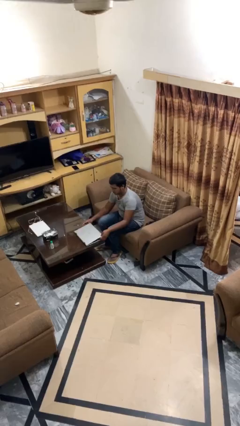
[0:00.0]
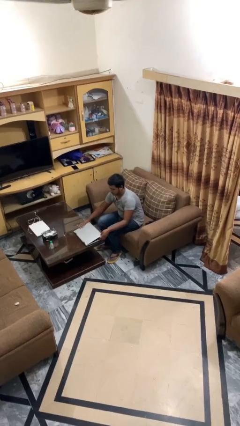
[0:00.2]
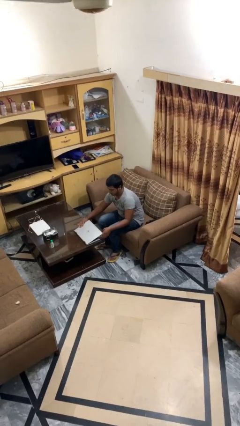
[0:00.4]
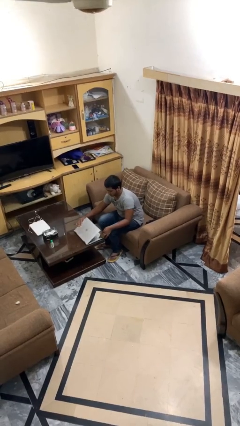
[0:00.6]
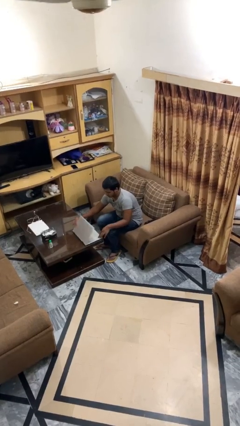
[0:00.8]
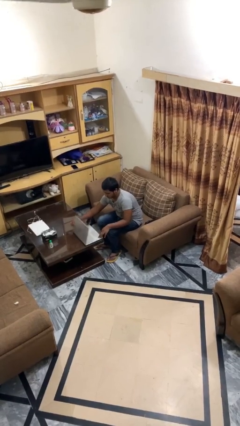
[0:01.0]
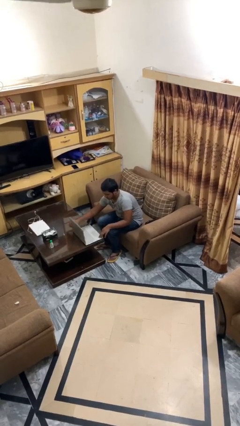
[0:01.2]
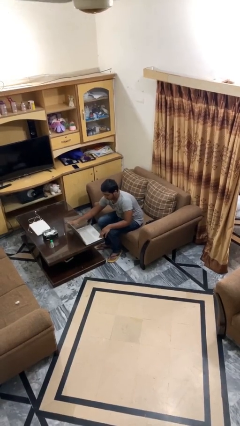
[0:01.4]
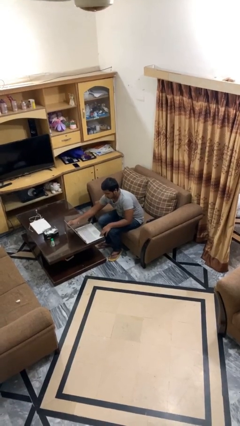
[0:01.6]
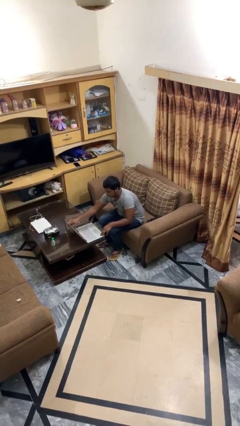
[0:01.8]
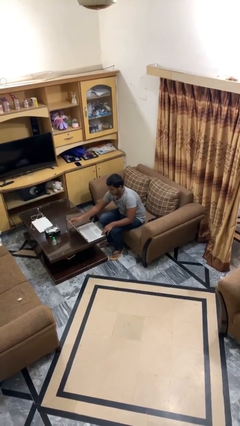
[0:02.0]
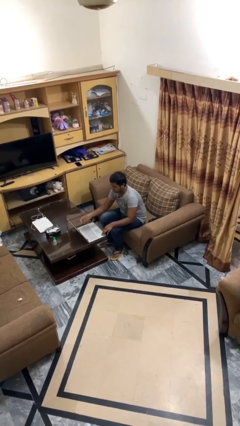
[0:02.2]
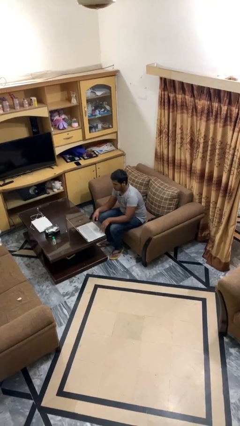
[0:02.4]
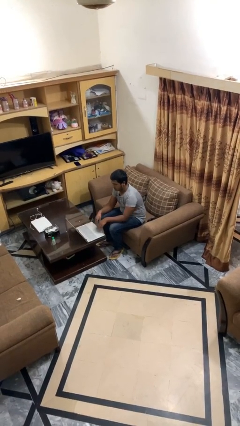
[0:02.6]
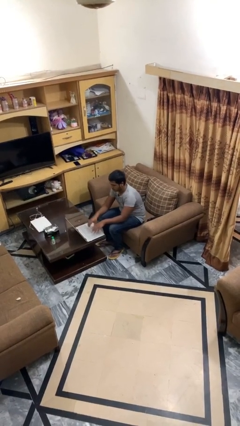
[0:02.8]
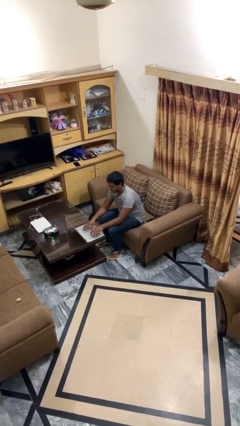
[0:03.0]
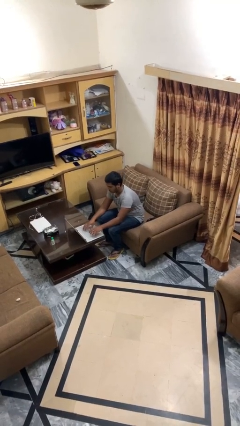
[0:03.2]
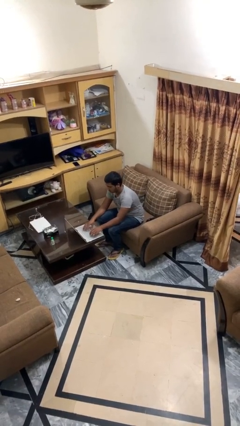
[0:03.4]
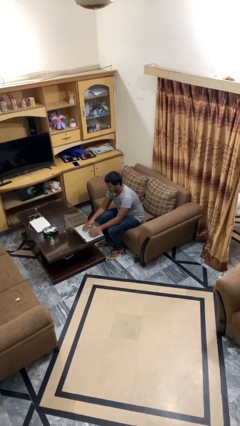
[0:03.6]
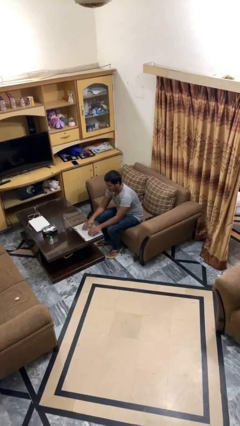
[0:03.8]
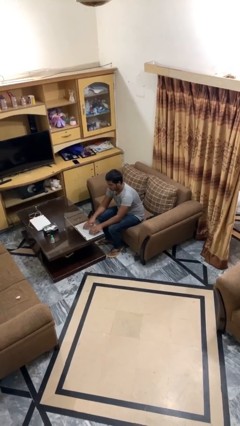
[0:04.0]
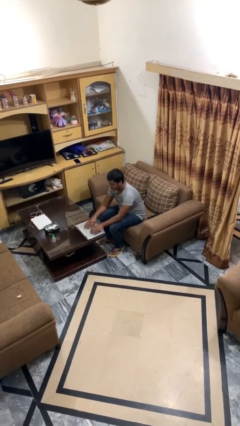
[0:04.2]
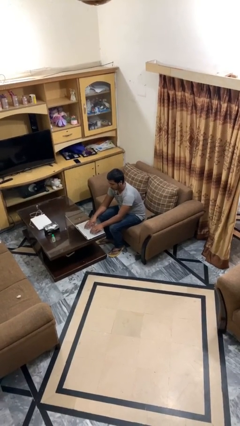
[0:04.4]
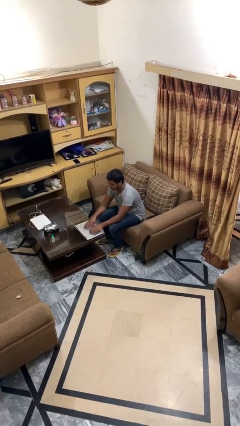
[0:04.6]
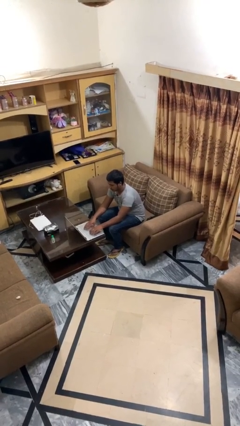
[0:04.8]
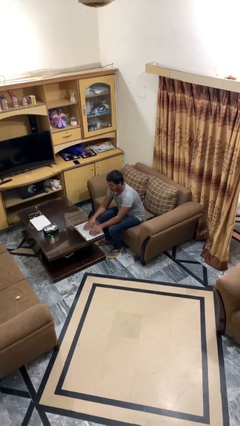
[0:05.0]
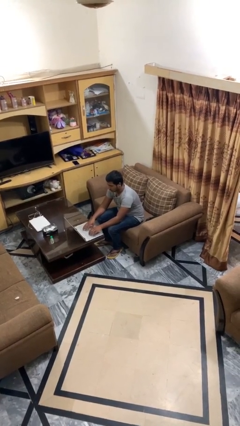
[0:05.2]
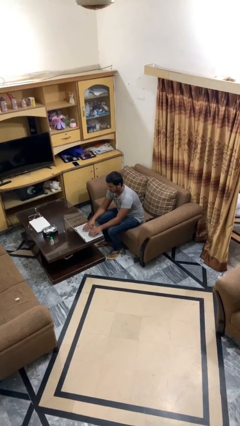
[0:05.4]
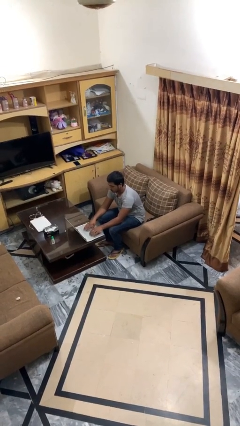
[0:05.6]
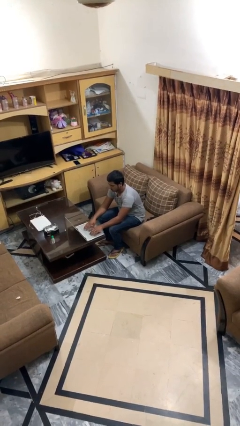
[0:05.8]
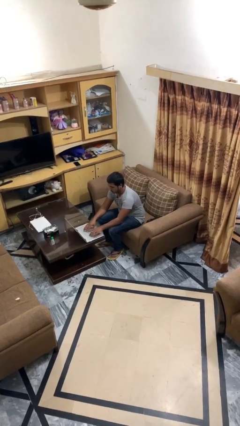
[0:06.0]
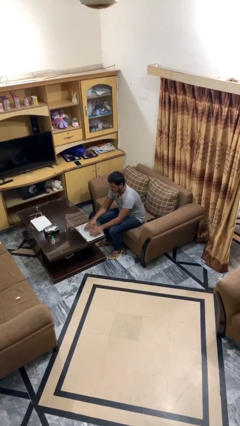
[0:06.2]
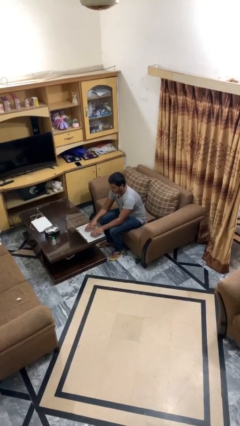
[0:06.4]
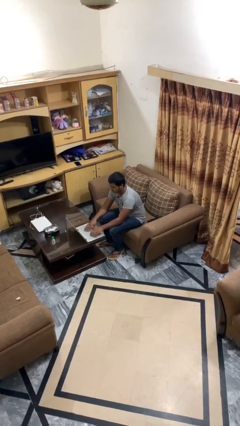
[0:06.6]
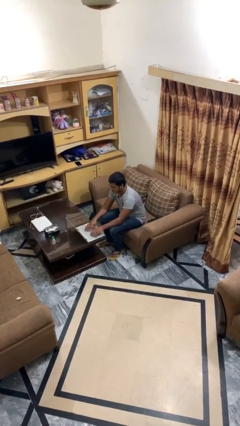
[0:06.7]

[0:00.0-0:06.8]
person interacts with laptop

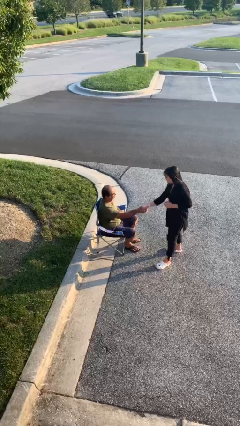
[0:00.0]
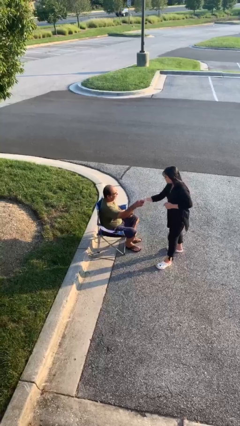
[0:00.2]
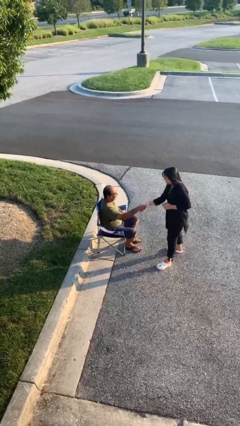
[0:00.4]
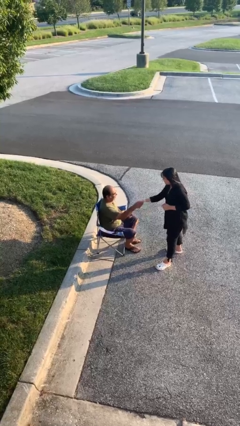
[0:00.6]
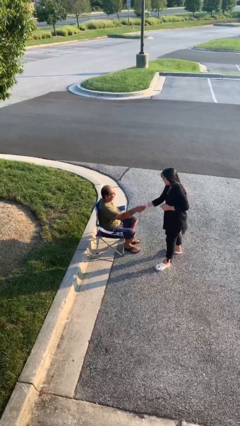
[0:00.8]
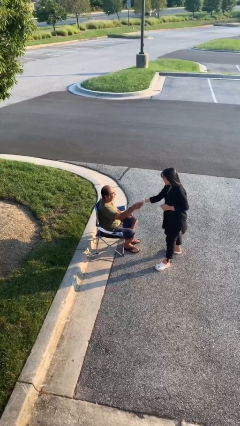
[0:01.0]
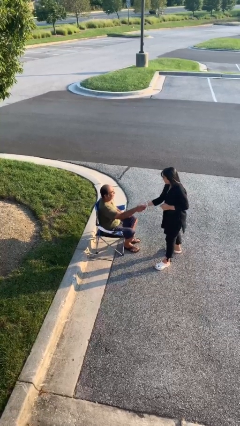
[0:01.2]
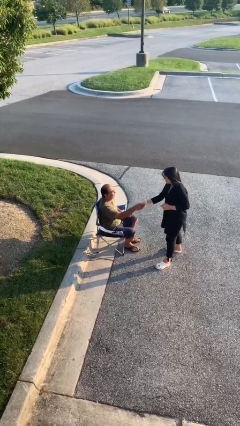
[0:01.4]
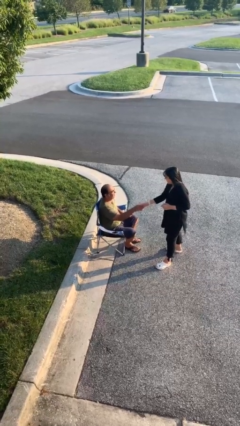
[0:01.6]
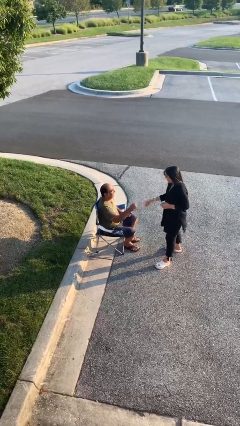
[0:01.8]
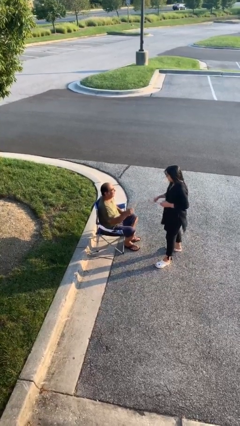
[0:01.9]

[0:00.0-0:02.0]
person shakes hand

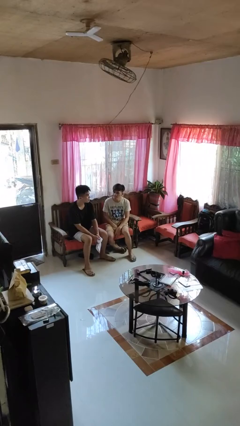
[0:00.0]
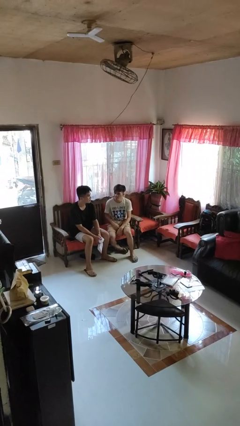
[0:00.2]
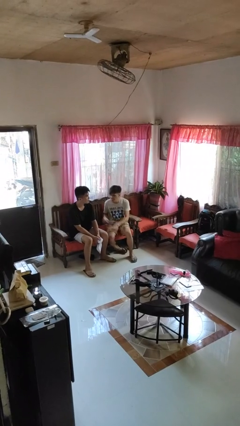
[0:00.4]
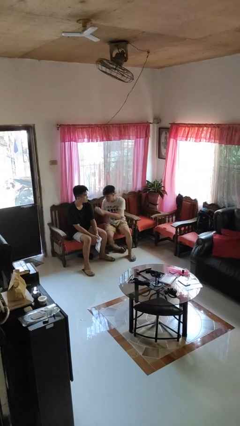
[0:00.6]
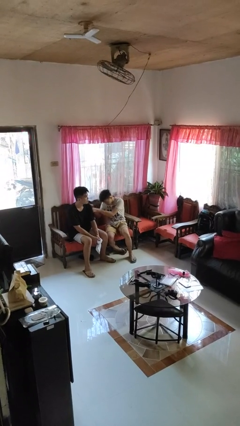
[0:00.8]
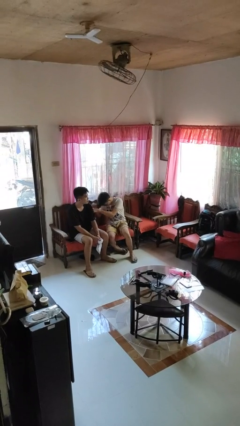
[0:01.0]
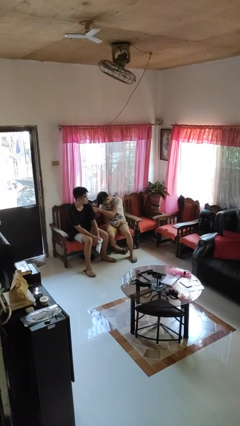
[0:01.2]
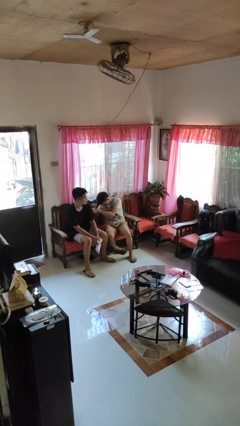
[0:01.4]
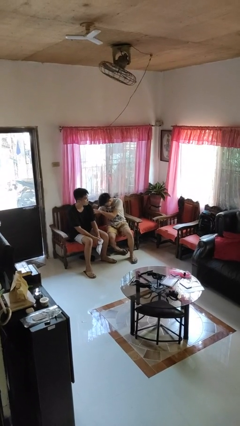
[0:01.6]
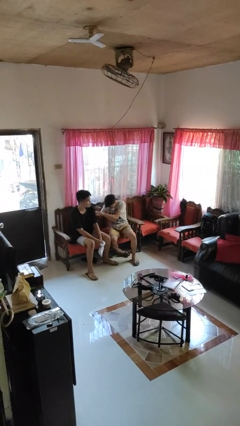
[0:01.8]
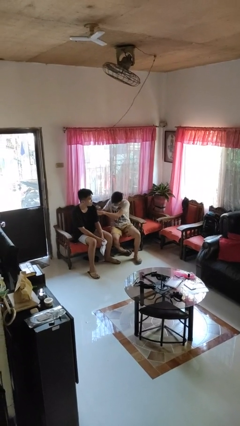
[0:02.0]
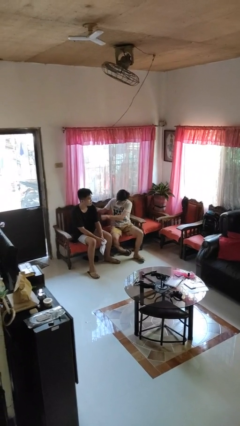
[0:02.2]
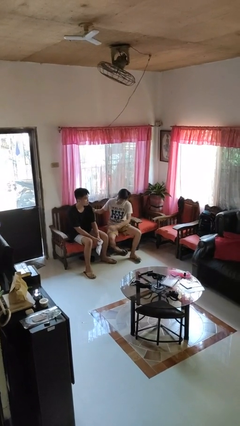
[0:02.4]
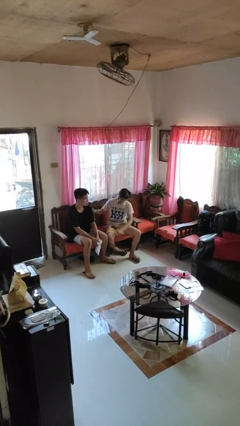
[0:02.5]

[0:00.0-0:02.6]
person pounds shoulders of person

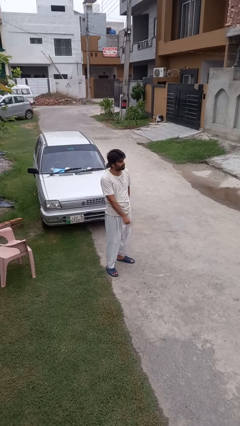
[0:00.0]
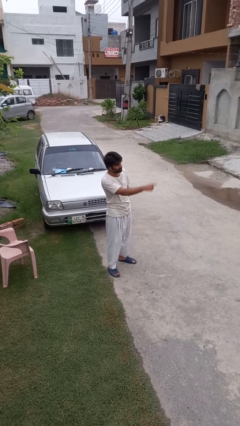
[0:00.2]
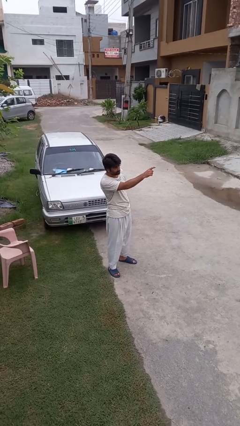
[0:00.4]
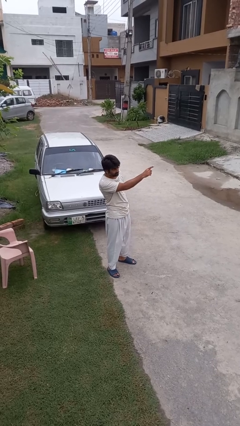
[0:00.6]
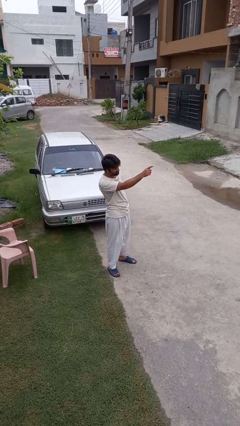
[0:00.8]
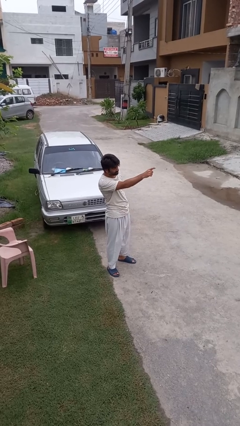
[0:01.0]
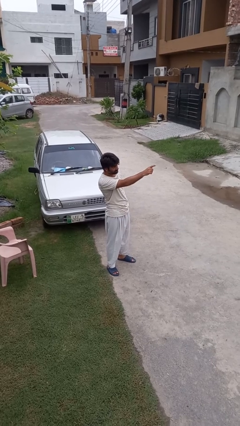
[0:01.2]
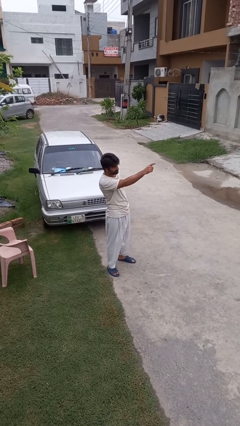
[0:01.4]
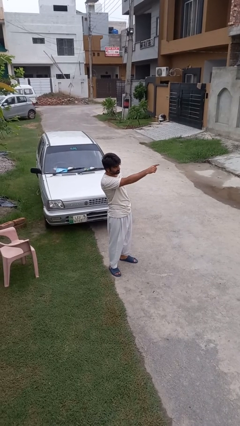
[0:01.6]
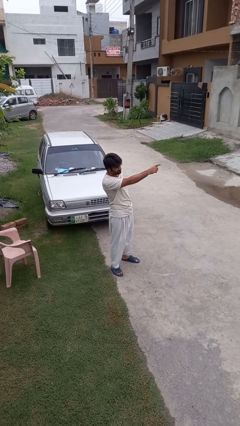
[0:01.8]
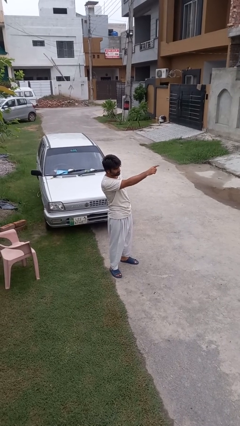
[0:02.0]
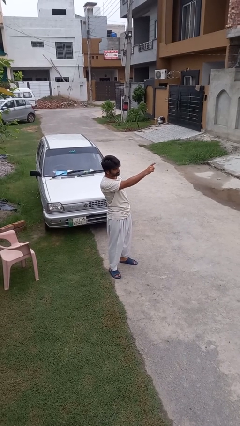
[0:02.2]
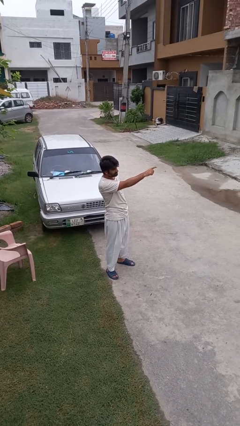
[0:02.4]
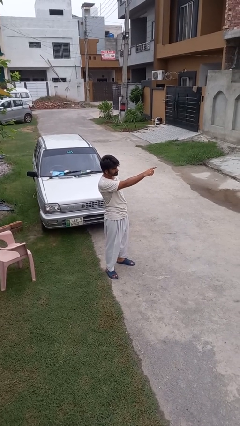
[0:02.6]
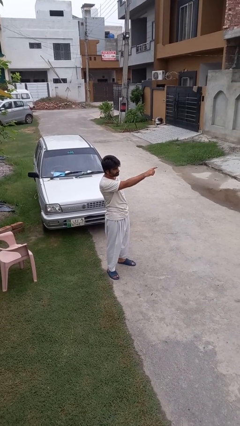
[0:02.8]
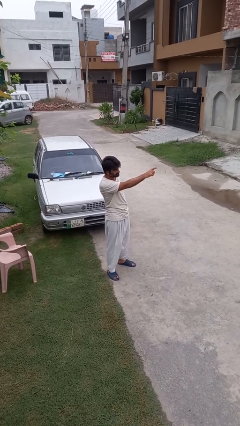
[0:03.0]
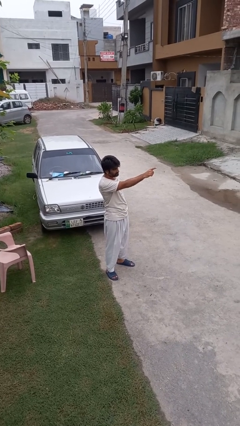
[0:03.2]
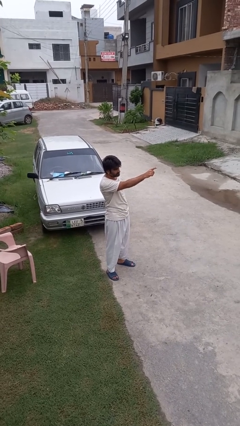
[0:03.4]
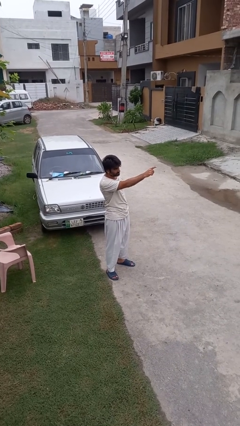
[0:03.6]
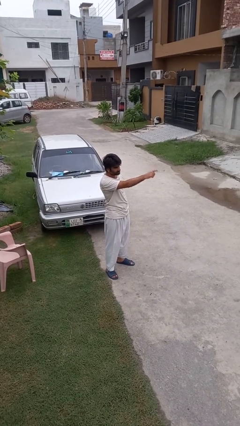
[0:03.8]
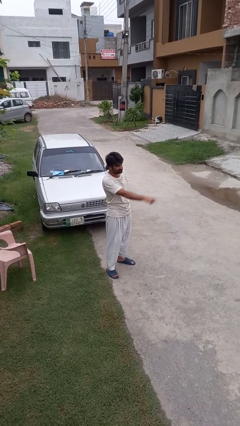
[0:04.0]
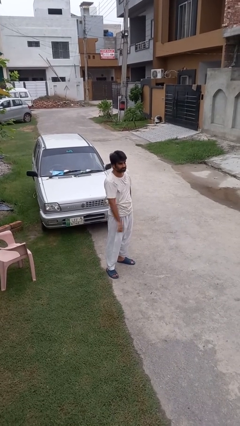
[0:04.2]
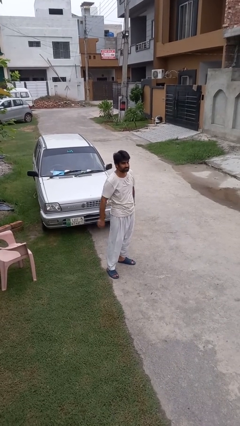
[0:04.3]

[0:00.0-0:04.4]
person points at person

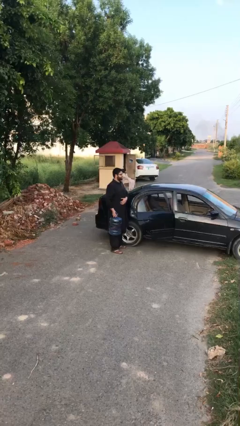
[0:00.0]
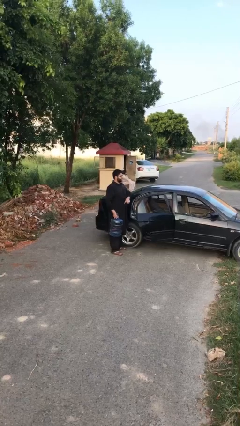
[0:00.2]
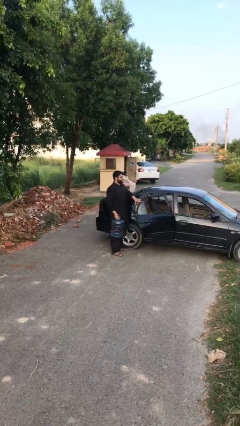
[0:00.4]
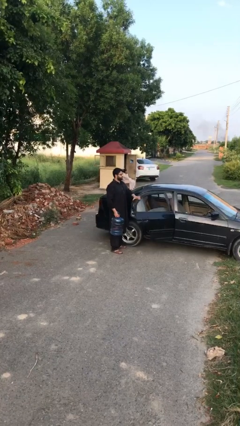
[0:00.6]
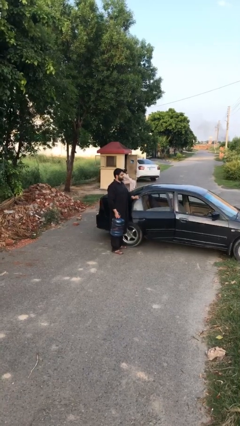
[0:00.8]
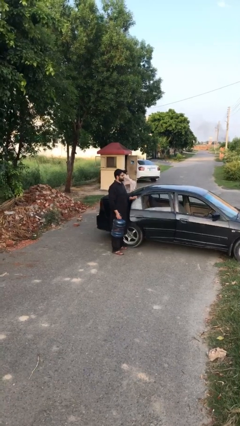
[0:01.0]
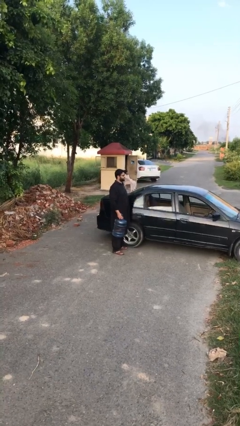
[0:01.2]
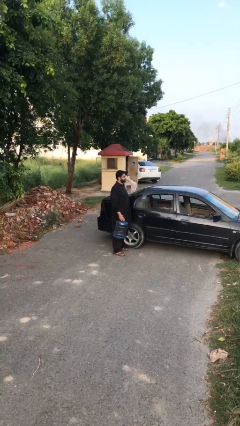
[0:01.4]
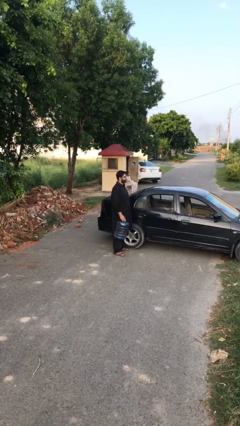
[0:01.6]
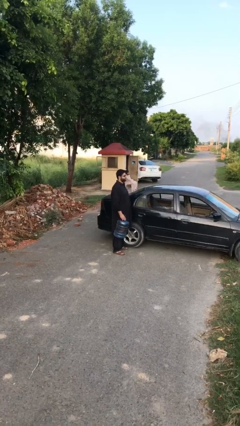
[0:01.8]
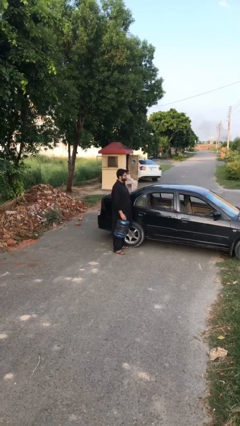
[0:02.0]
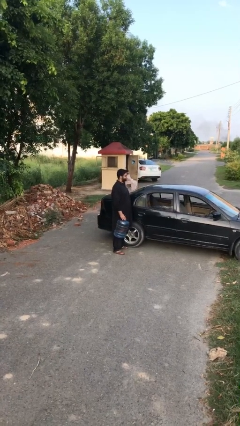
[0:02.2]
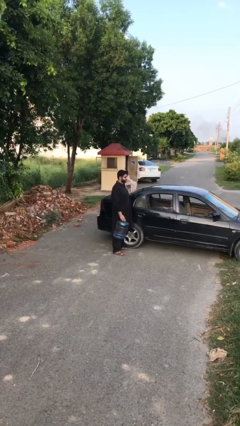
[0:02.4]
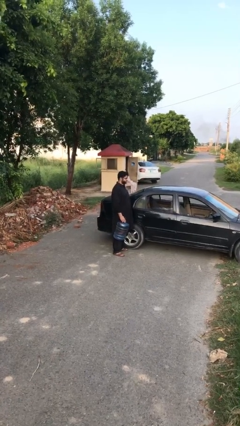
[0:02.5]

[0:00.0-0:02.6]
person closes car door
